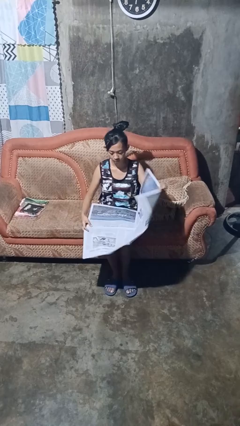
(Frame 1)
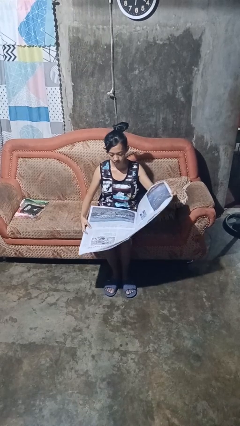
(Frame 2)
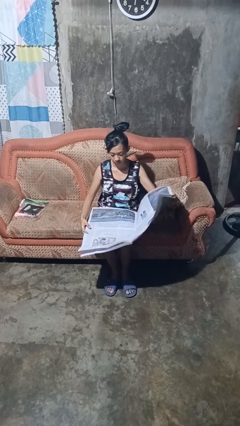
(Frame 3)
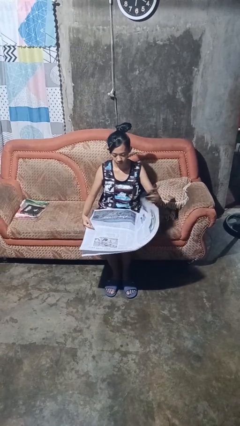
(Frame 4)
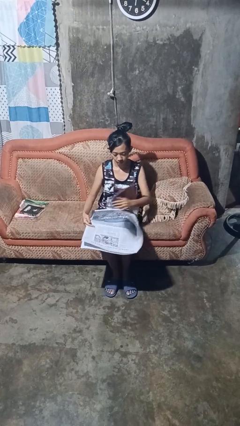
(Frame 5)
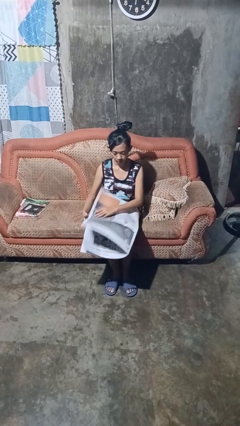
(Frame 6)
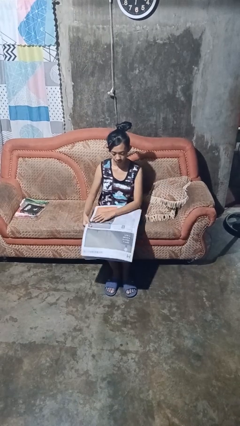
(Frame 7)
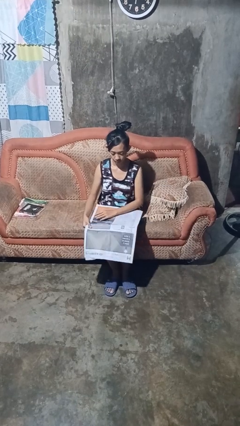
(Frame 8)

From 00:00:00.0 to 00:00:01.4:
person reads newspaper

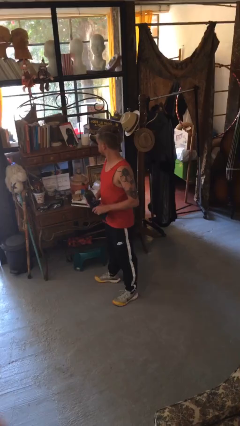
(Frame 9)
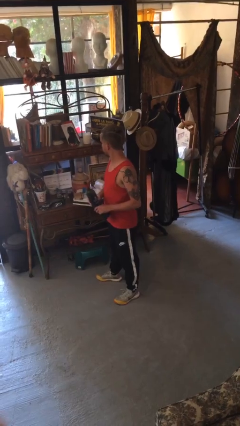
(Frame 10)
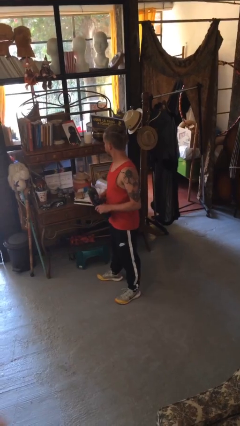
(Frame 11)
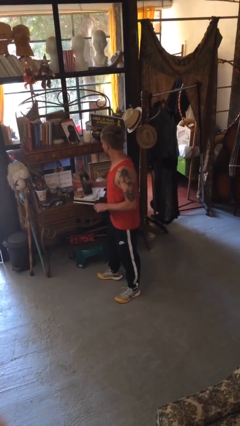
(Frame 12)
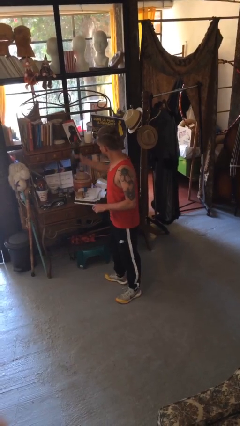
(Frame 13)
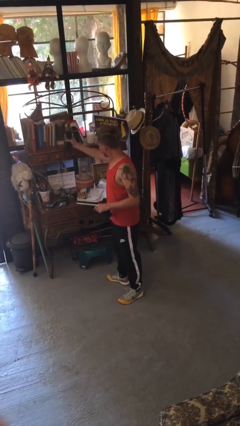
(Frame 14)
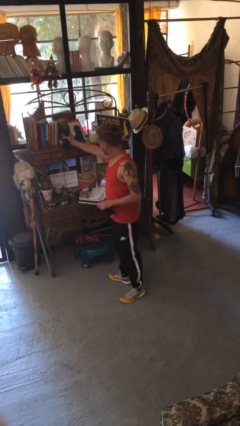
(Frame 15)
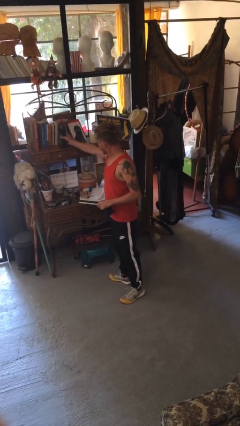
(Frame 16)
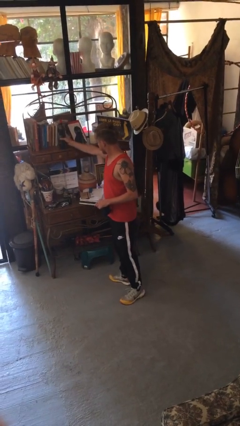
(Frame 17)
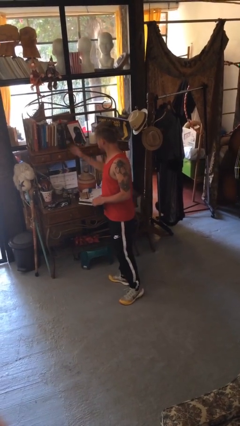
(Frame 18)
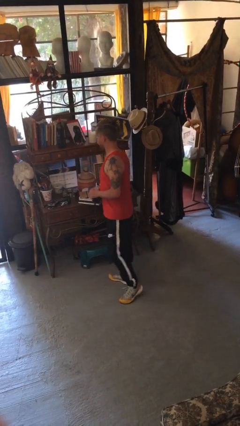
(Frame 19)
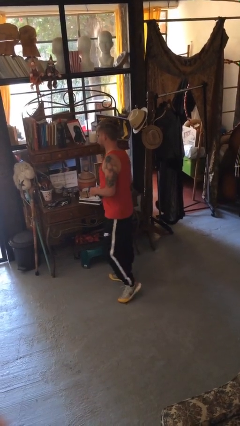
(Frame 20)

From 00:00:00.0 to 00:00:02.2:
person puts down object on shelf

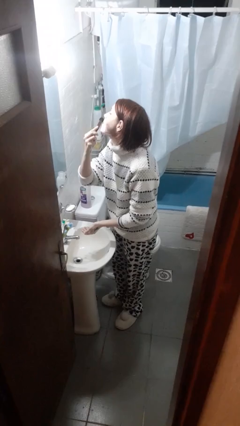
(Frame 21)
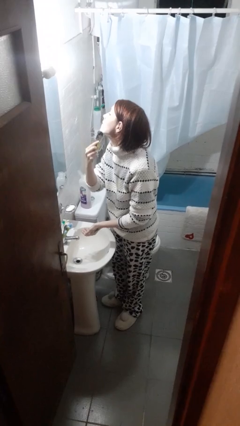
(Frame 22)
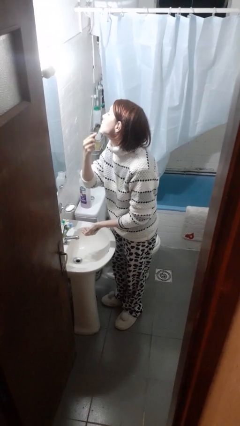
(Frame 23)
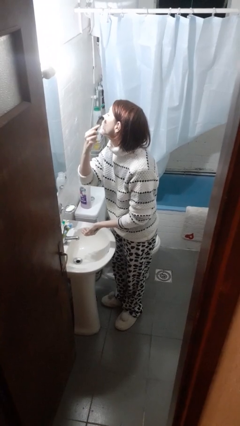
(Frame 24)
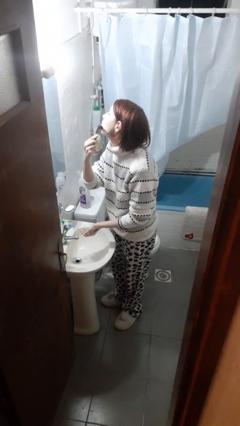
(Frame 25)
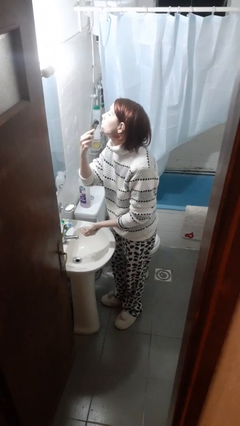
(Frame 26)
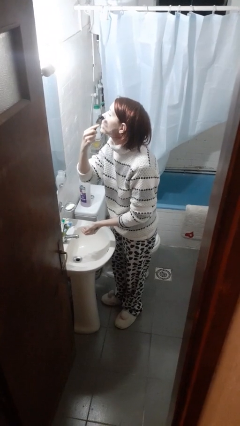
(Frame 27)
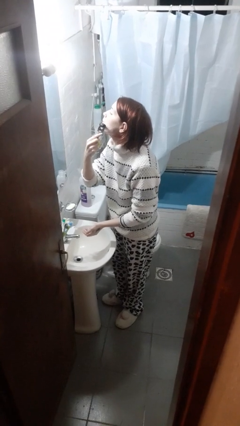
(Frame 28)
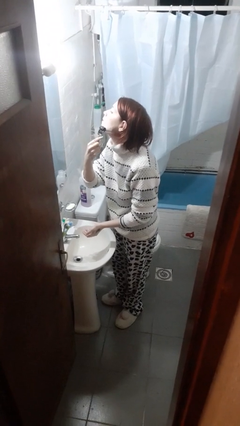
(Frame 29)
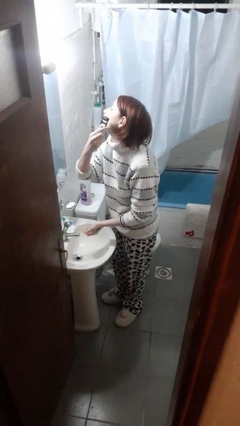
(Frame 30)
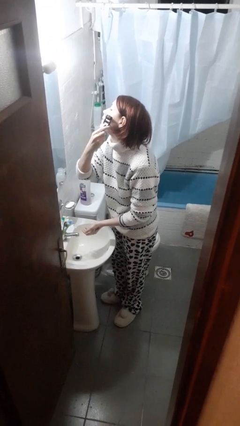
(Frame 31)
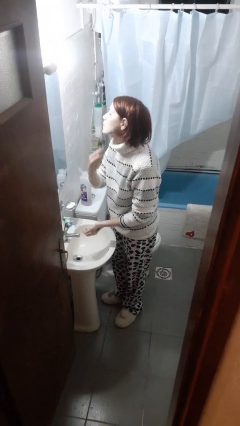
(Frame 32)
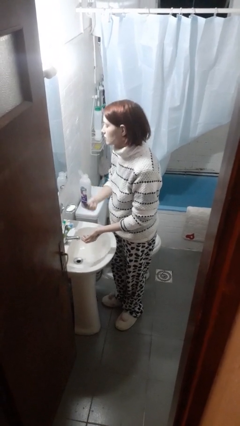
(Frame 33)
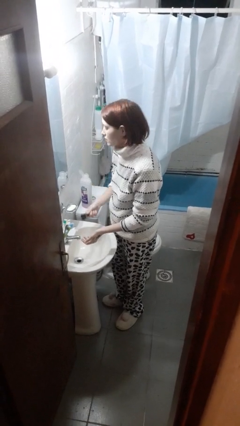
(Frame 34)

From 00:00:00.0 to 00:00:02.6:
person shaves face

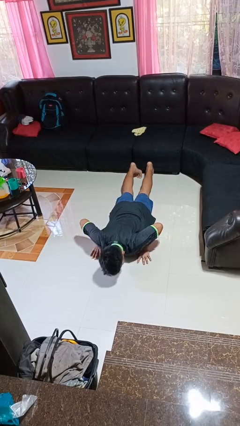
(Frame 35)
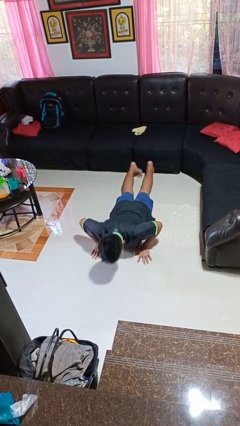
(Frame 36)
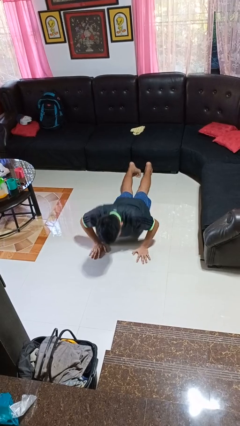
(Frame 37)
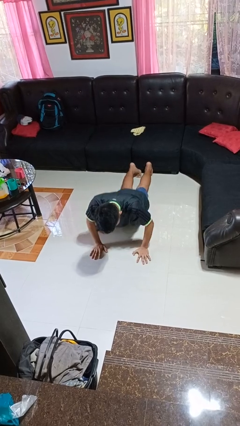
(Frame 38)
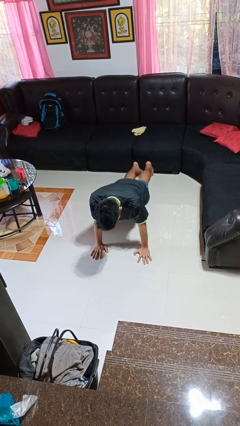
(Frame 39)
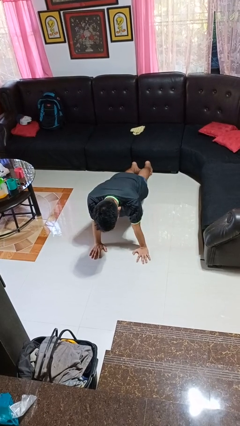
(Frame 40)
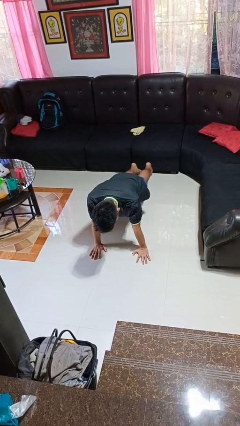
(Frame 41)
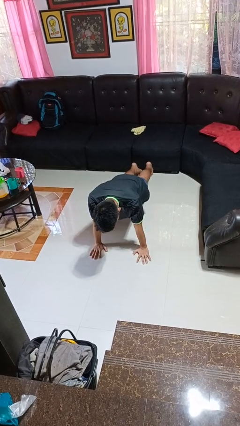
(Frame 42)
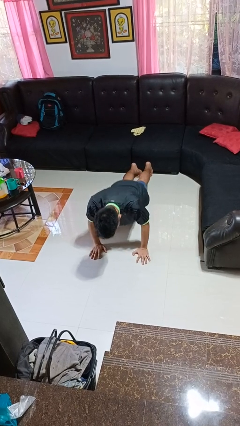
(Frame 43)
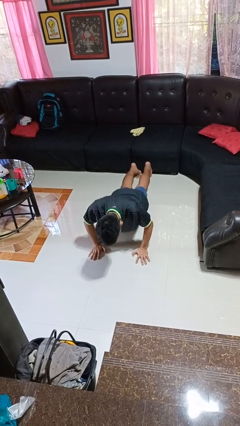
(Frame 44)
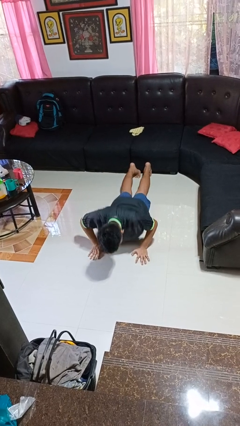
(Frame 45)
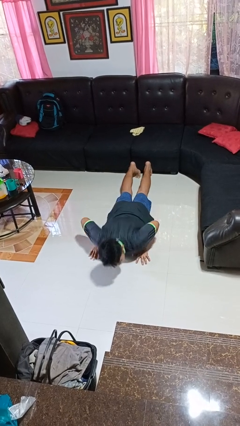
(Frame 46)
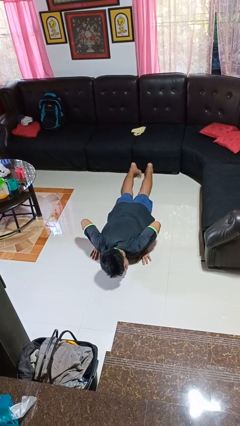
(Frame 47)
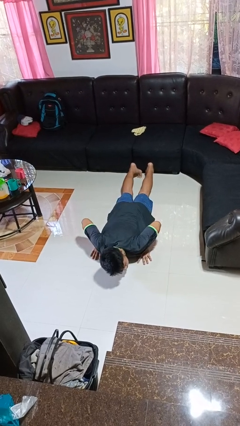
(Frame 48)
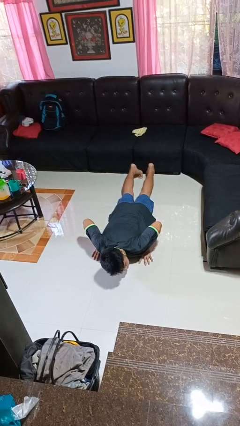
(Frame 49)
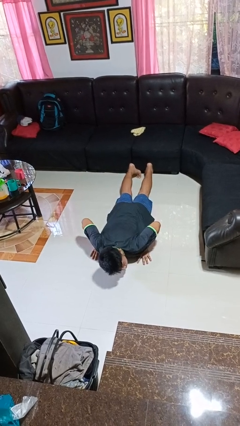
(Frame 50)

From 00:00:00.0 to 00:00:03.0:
person exercises with pushup

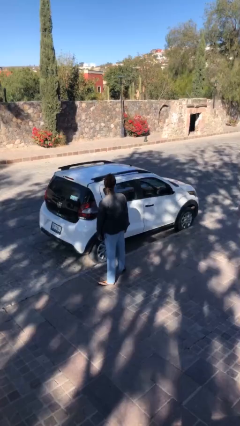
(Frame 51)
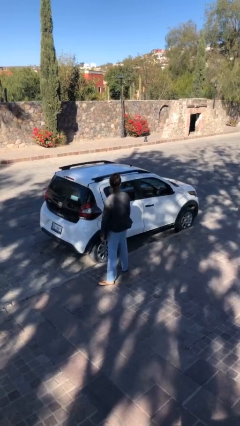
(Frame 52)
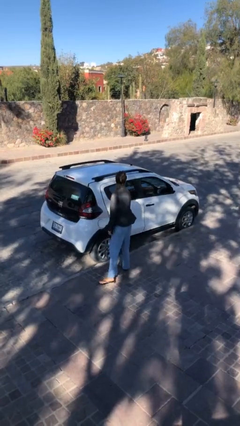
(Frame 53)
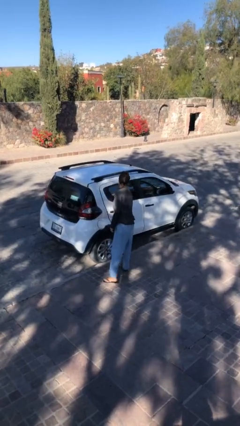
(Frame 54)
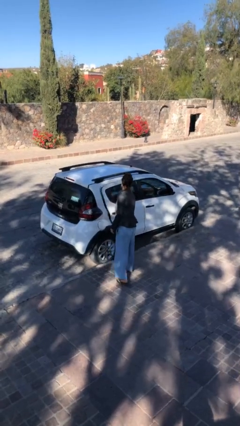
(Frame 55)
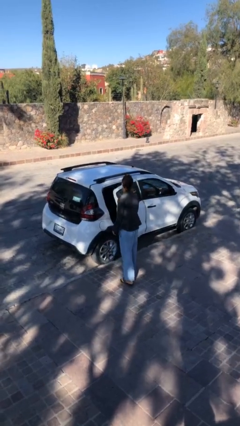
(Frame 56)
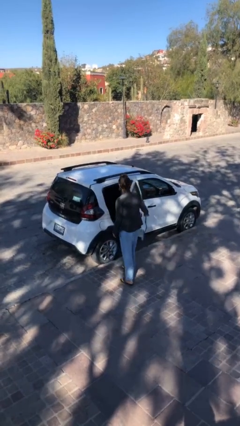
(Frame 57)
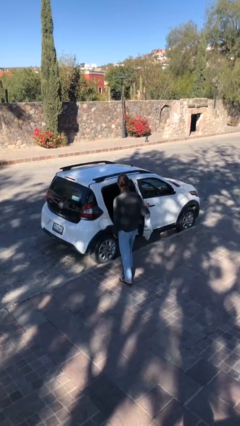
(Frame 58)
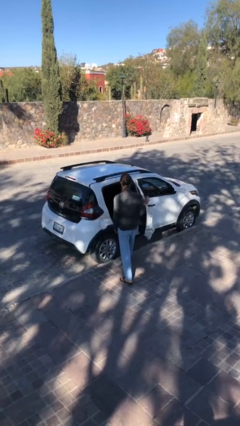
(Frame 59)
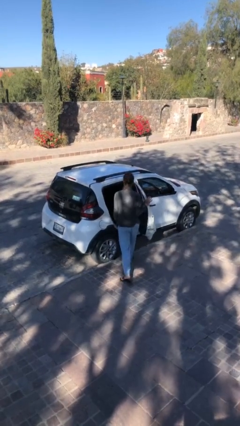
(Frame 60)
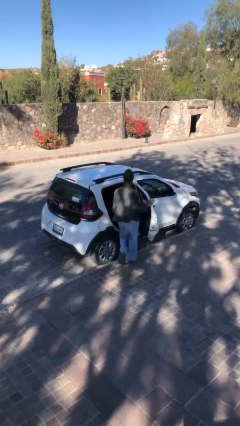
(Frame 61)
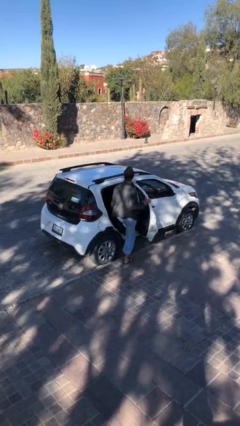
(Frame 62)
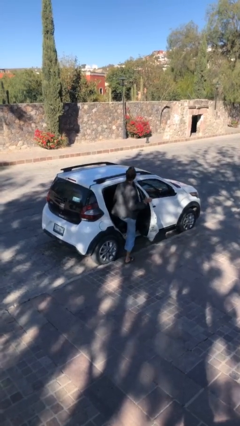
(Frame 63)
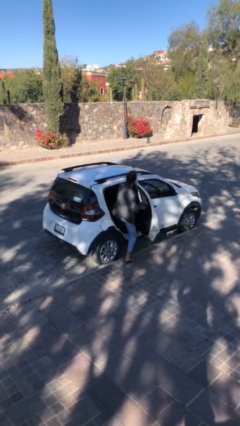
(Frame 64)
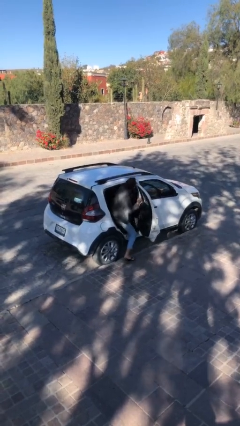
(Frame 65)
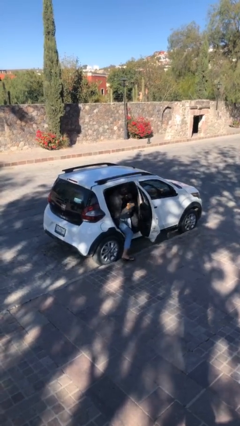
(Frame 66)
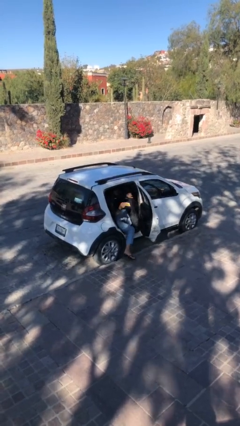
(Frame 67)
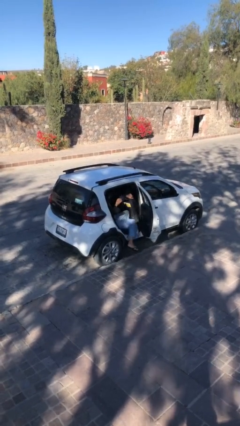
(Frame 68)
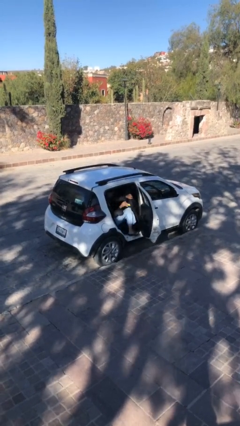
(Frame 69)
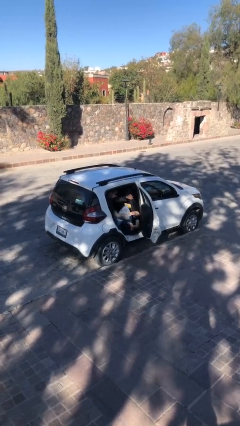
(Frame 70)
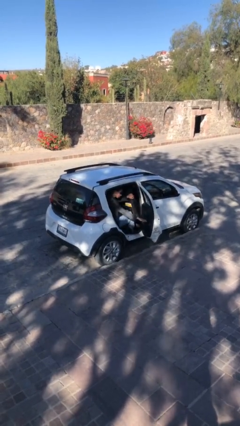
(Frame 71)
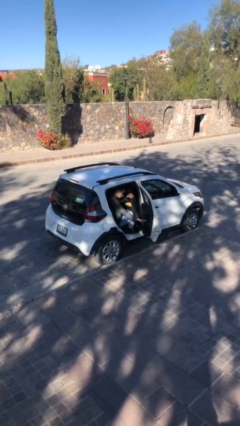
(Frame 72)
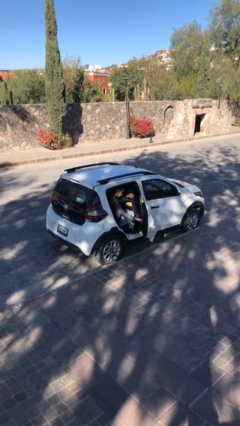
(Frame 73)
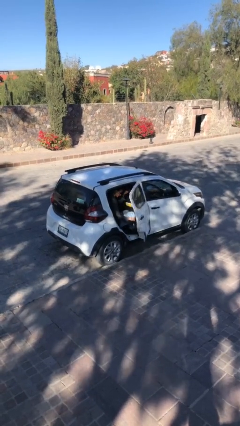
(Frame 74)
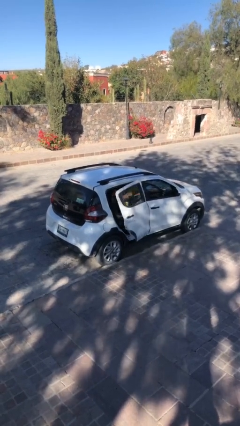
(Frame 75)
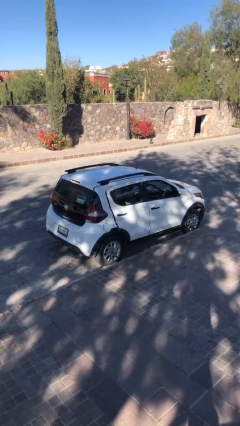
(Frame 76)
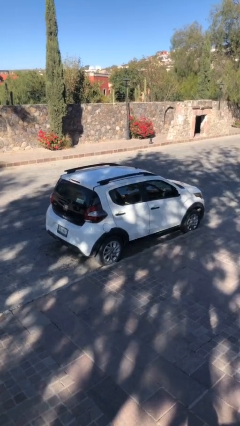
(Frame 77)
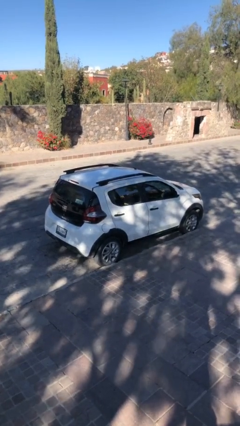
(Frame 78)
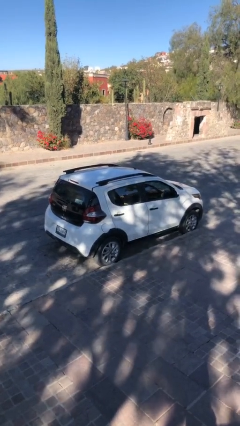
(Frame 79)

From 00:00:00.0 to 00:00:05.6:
car picks up person

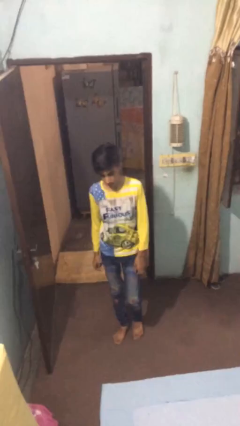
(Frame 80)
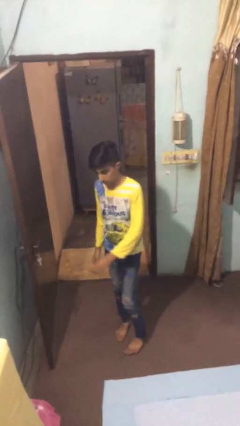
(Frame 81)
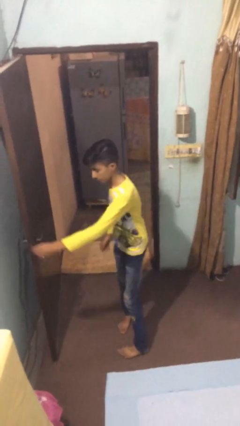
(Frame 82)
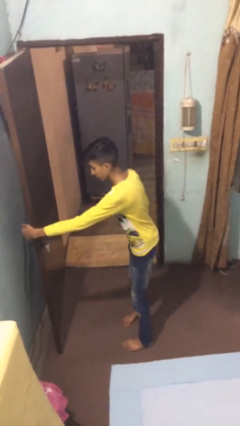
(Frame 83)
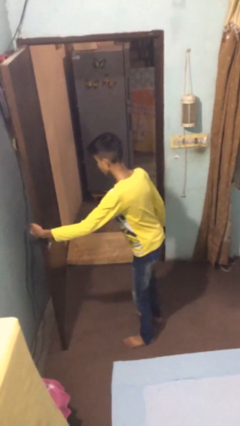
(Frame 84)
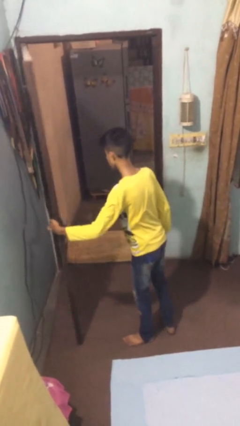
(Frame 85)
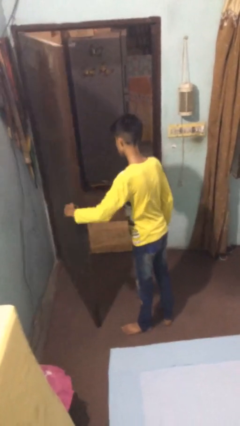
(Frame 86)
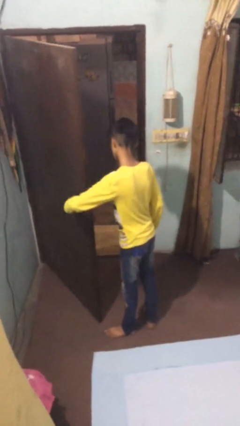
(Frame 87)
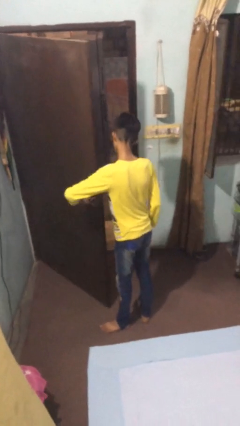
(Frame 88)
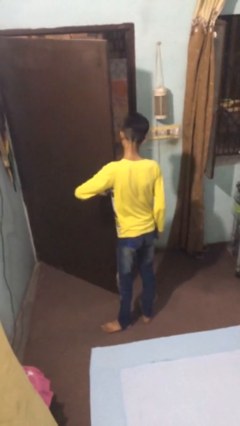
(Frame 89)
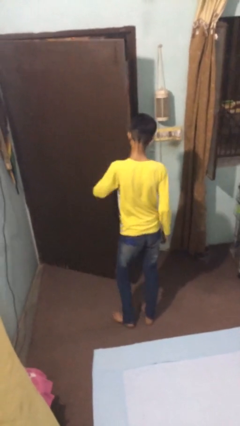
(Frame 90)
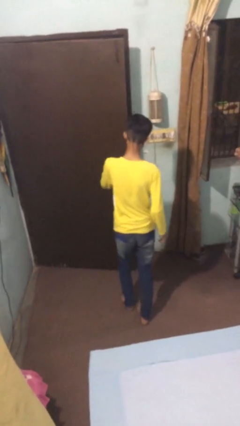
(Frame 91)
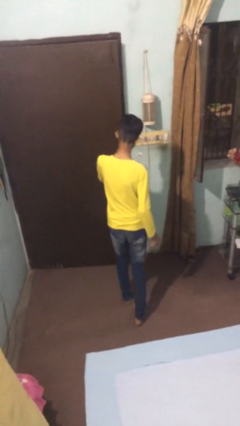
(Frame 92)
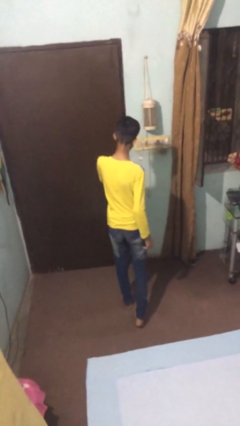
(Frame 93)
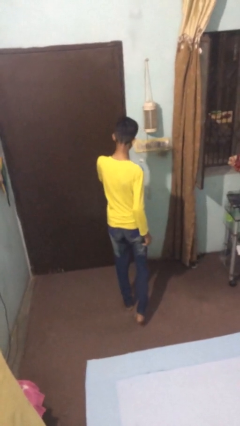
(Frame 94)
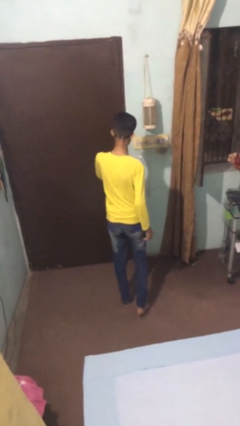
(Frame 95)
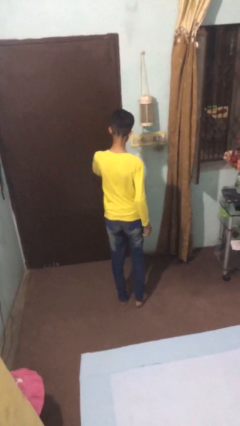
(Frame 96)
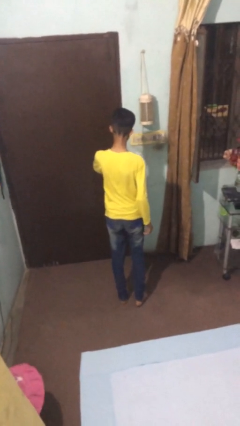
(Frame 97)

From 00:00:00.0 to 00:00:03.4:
person closes facility door
